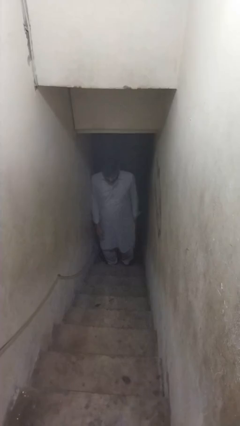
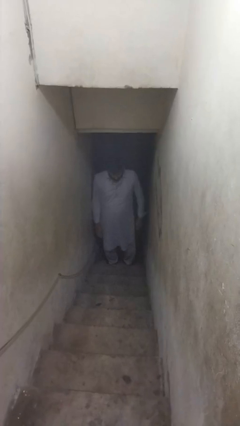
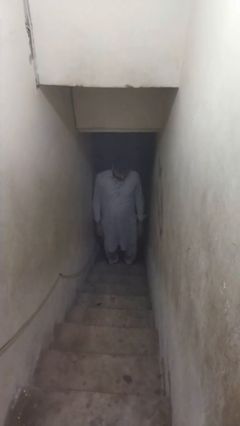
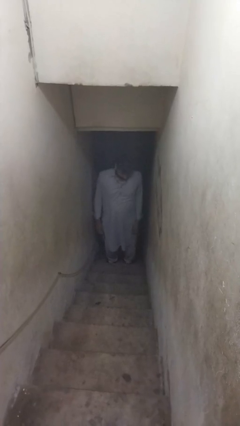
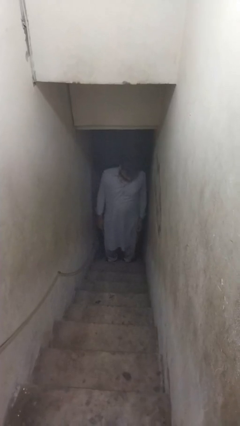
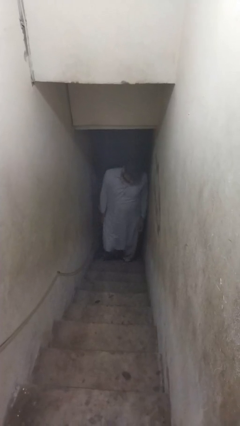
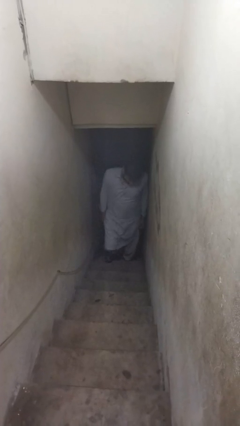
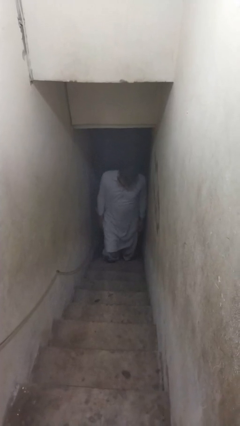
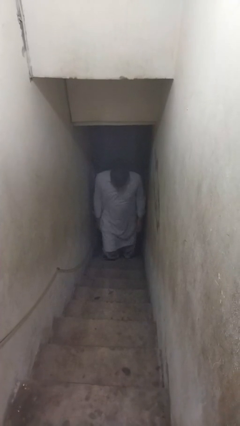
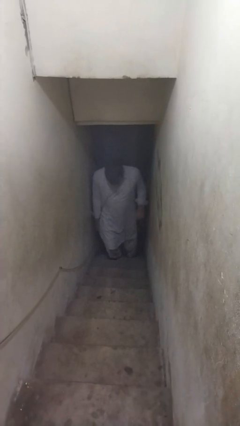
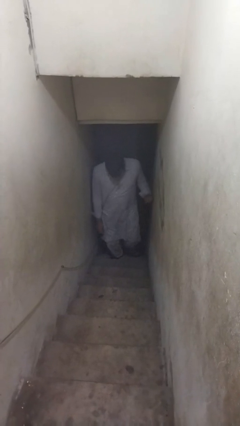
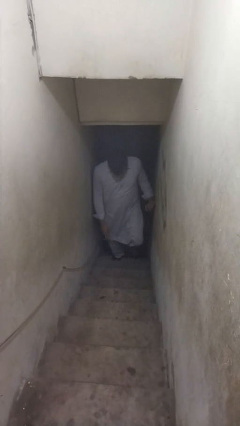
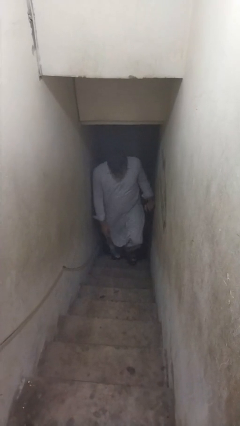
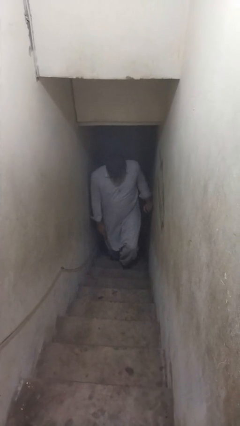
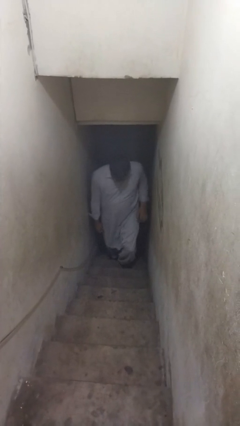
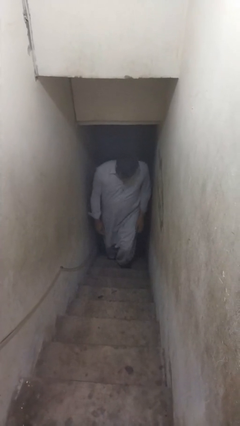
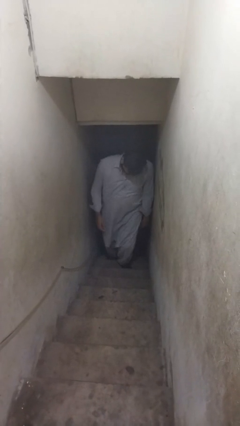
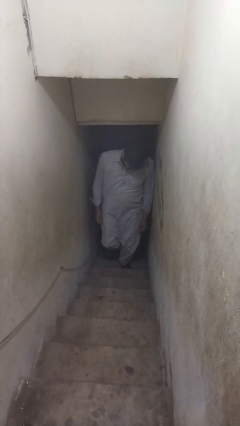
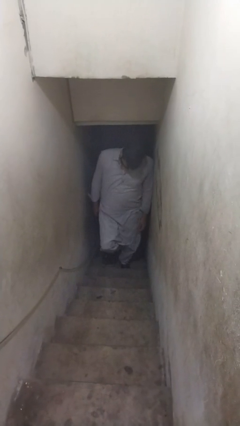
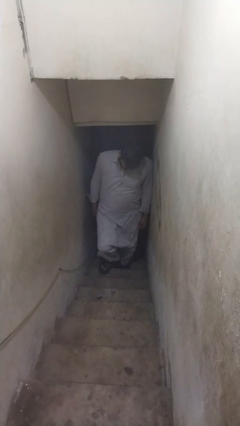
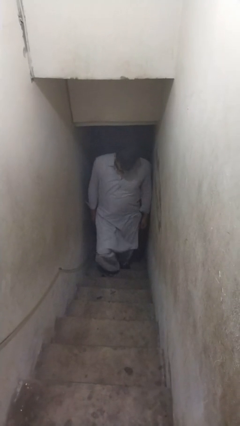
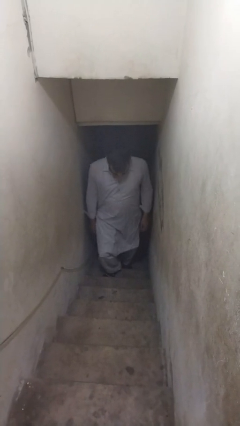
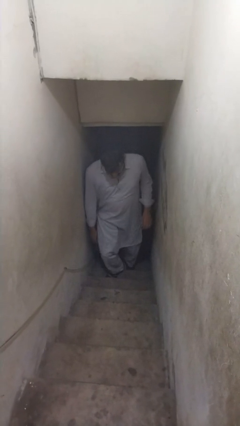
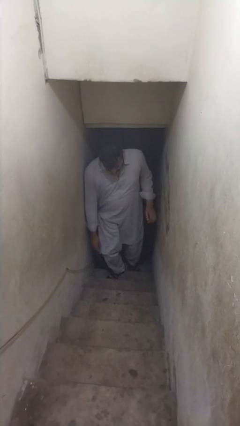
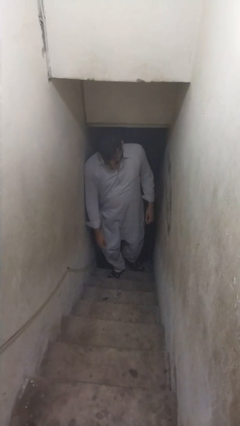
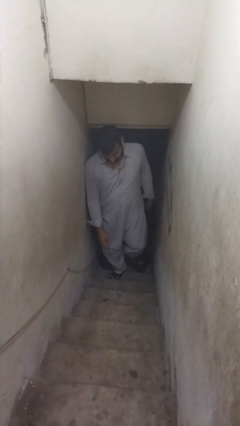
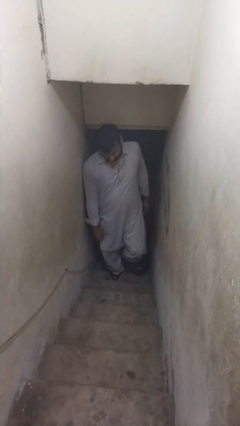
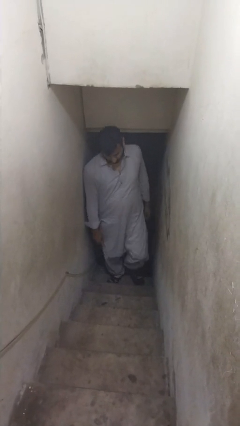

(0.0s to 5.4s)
person climbs up stairs

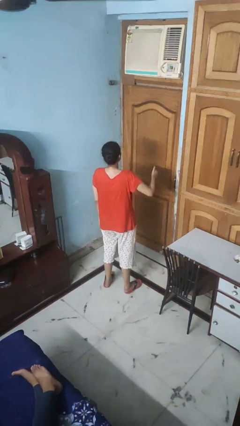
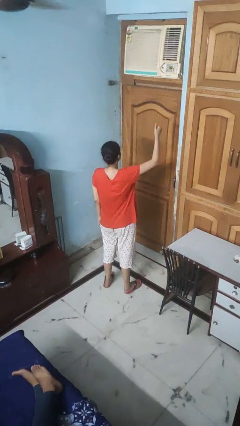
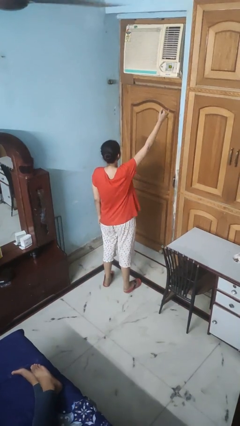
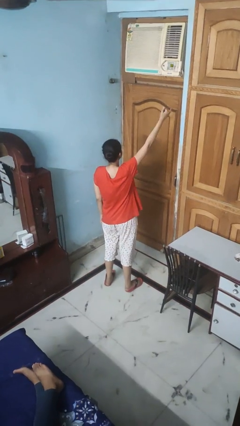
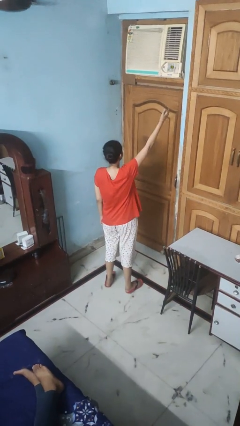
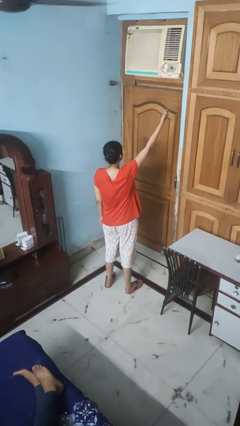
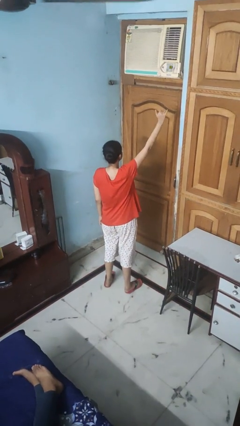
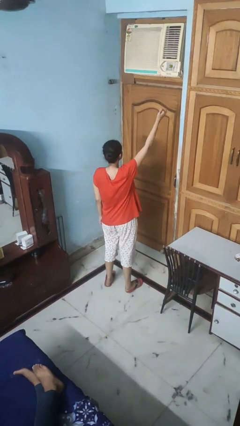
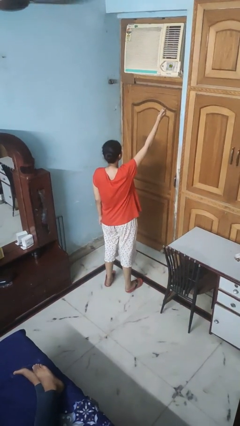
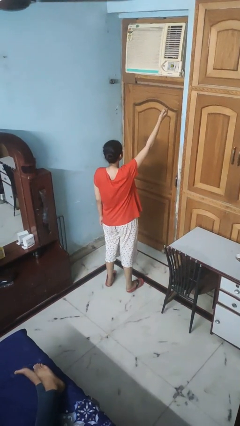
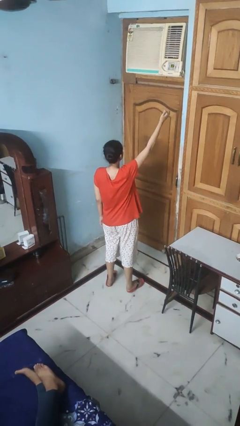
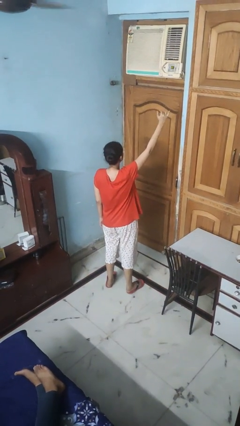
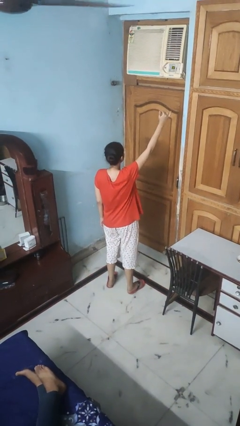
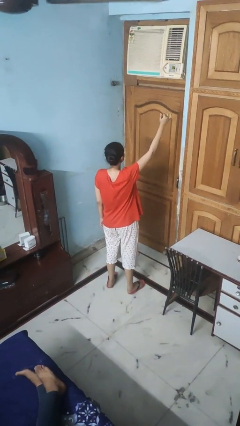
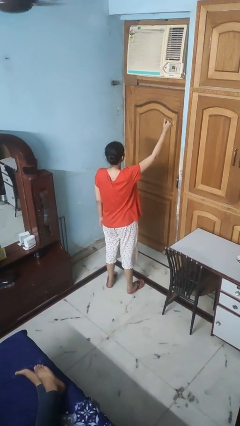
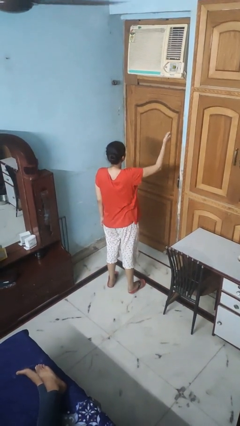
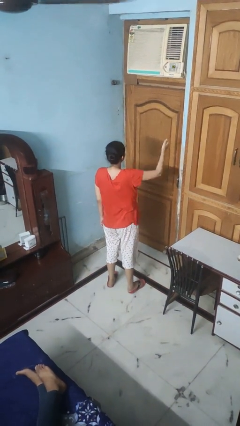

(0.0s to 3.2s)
person gestures hang loose

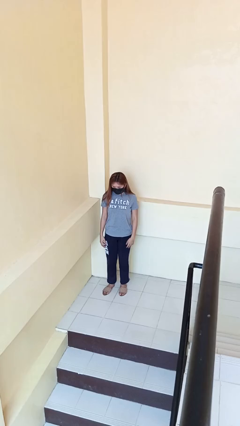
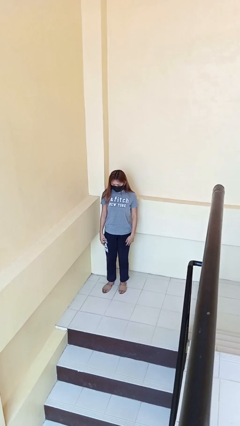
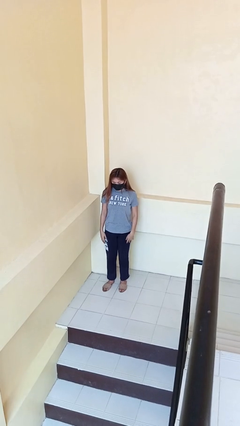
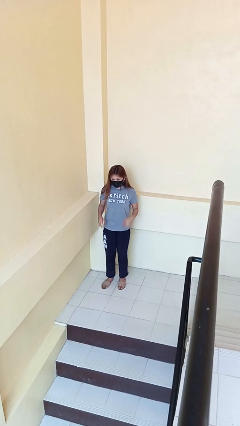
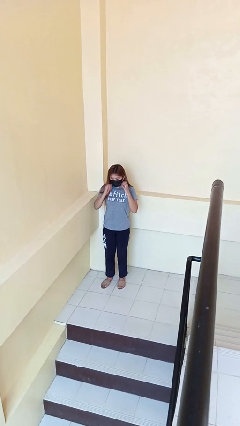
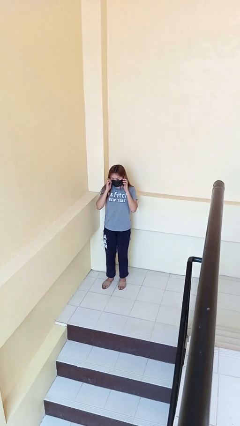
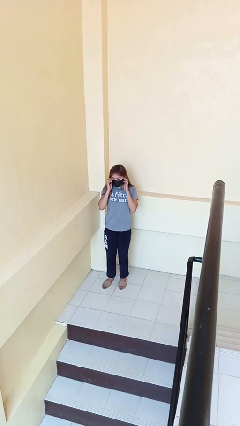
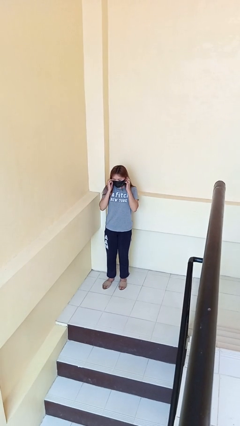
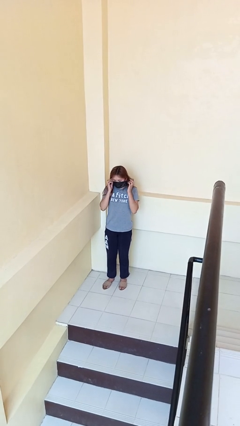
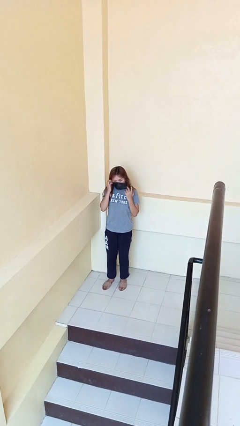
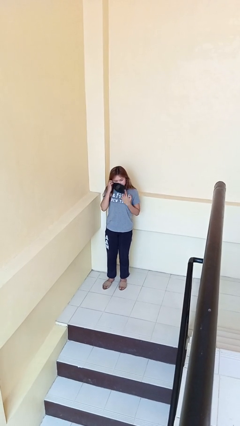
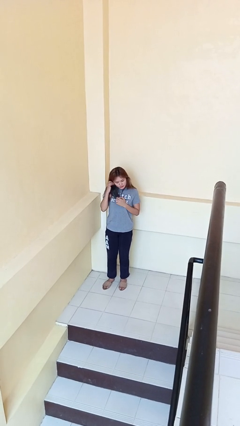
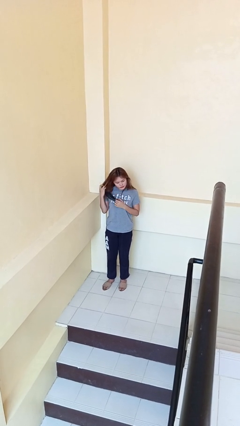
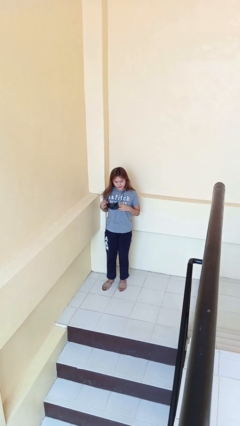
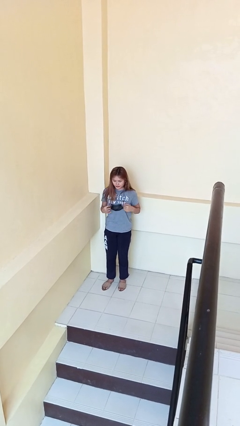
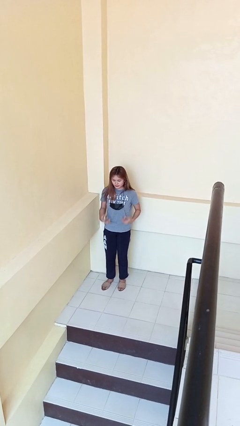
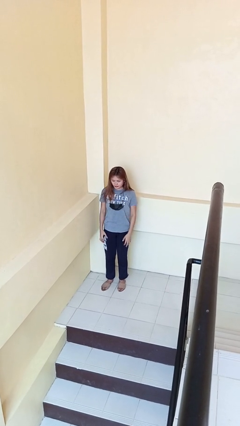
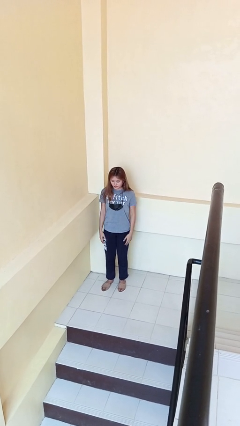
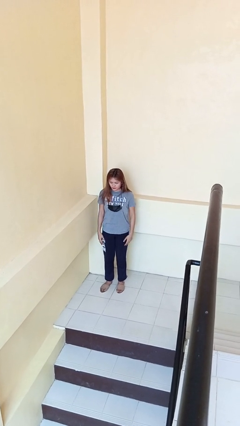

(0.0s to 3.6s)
person takes off facemask

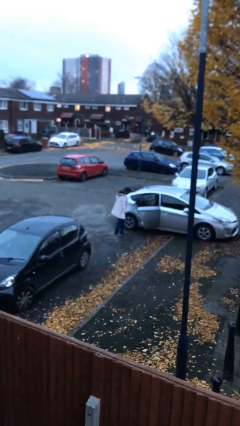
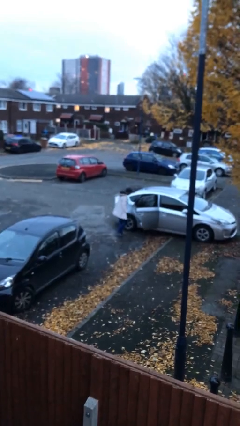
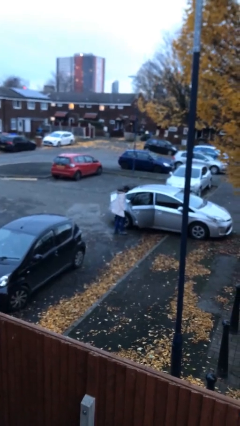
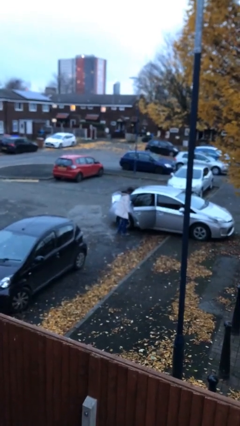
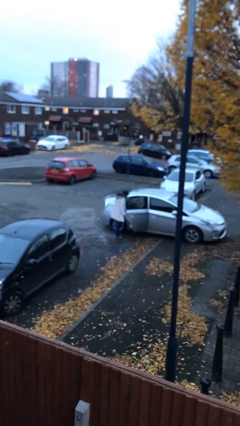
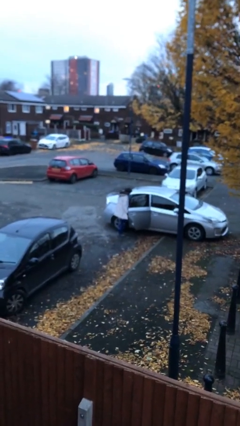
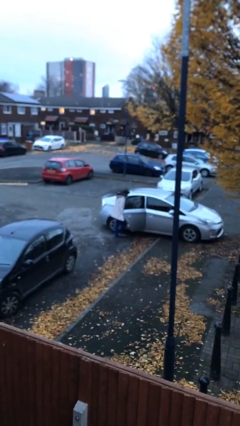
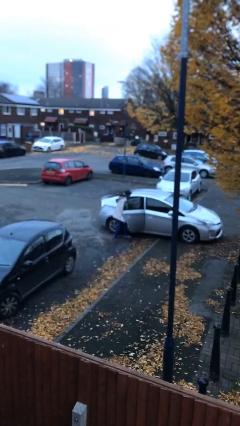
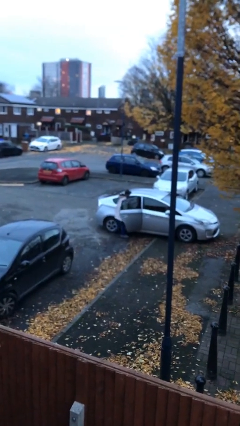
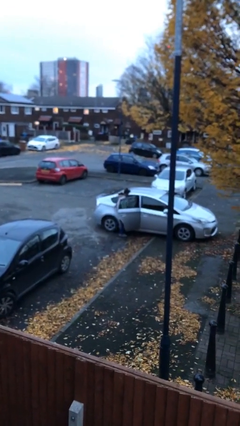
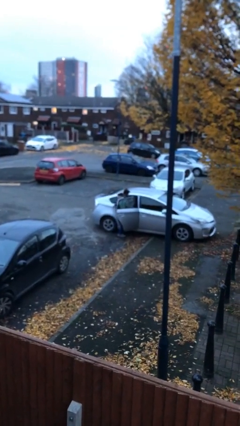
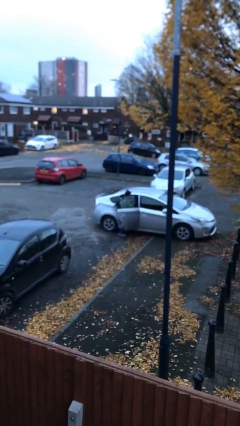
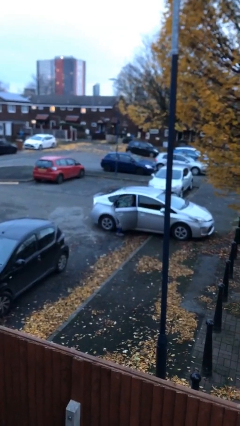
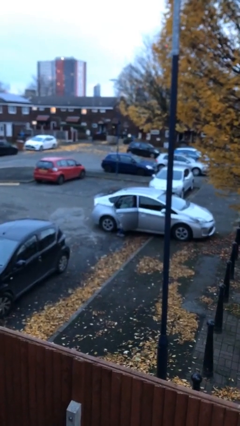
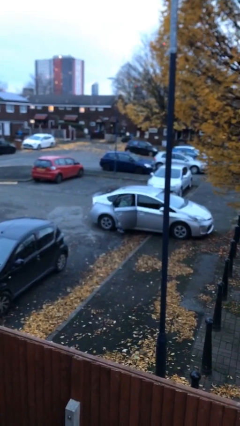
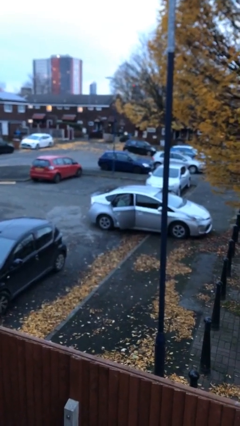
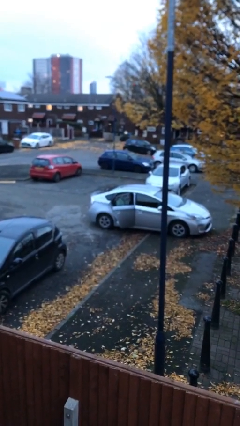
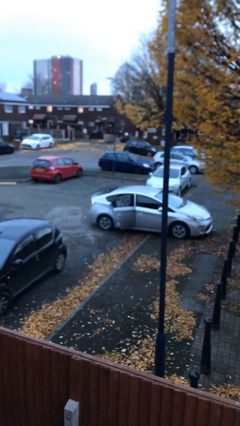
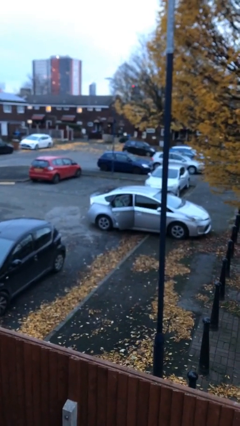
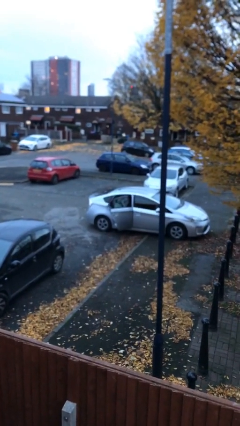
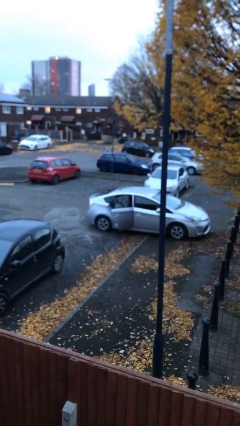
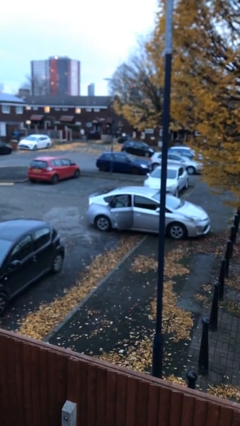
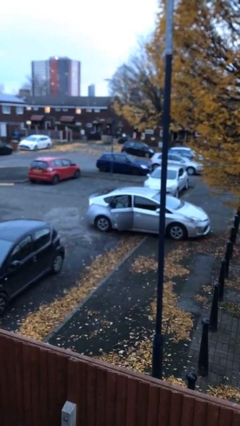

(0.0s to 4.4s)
person enters car

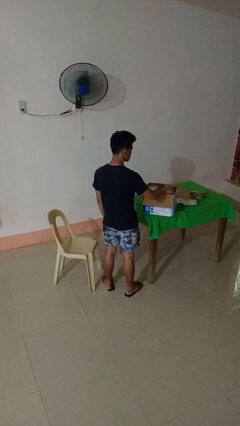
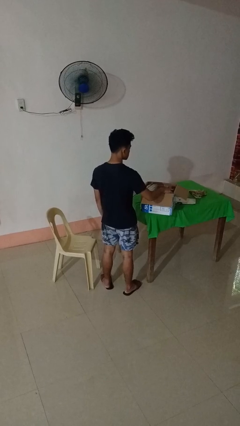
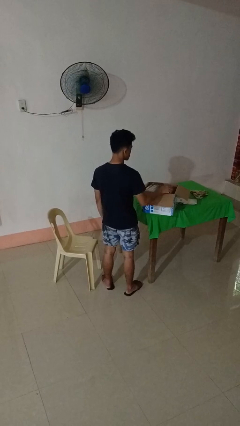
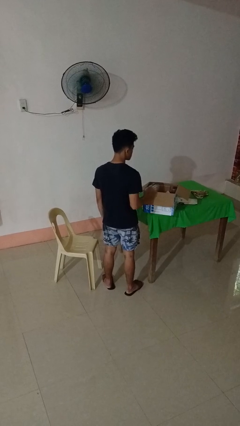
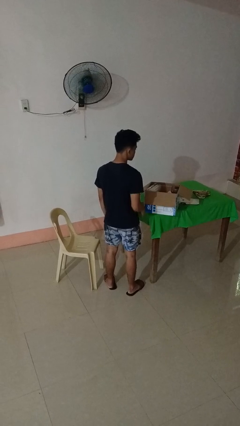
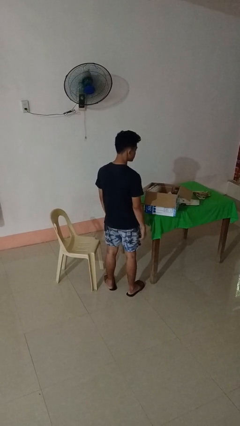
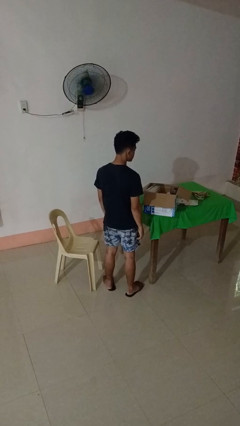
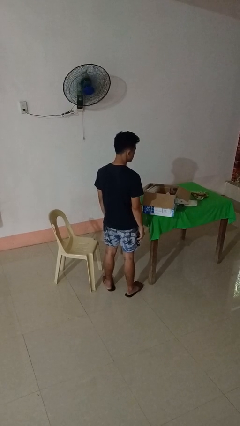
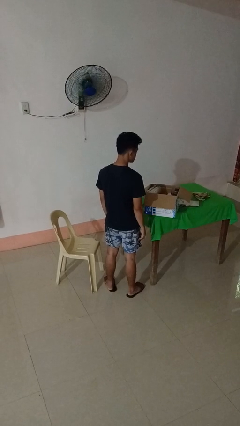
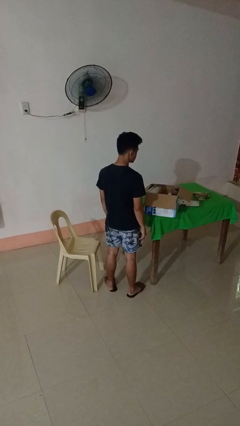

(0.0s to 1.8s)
person puts object into box
